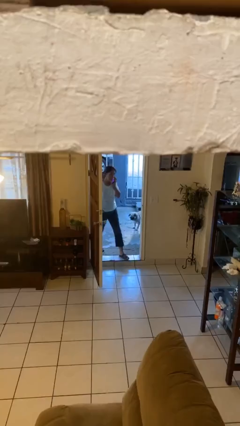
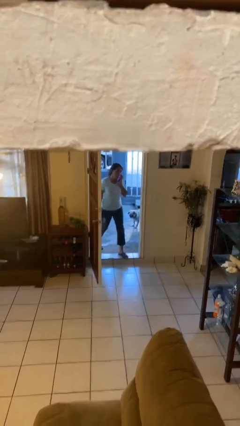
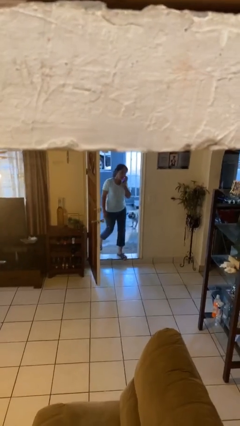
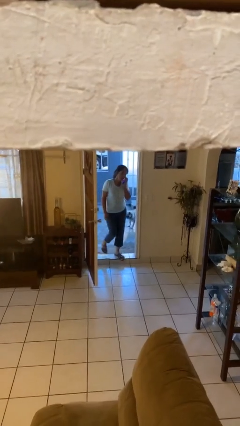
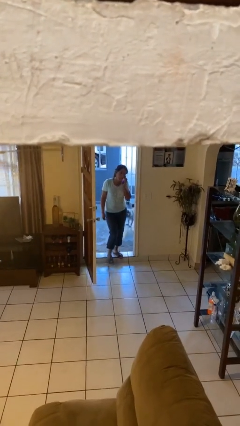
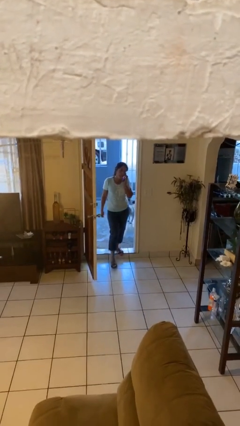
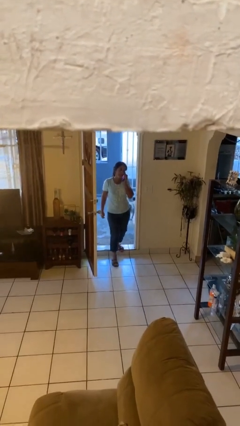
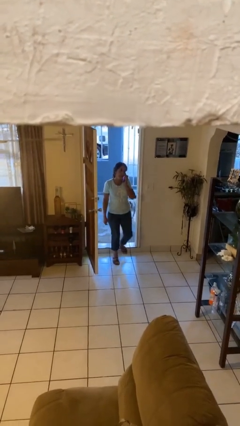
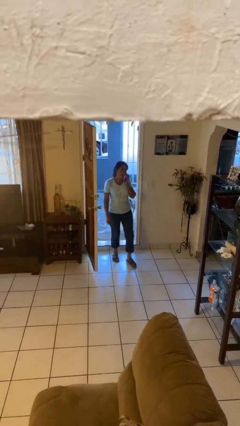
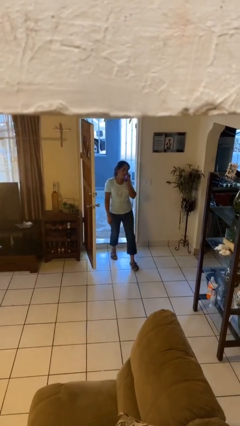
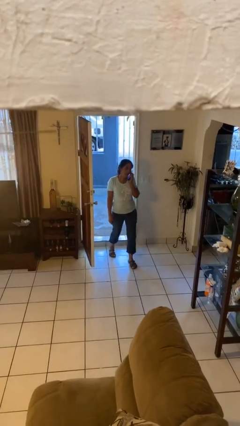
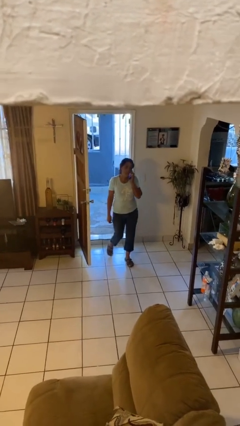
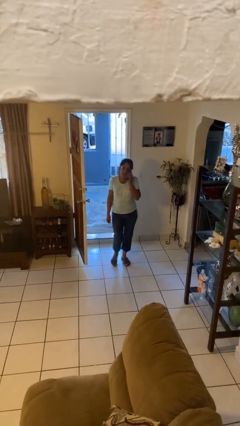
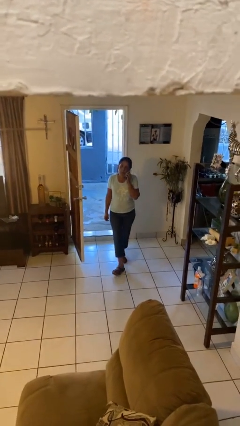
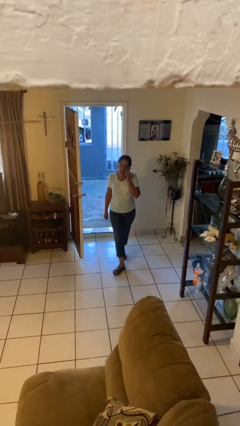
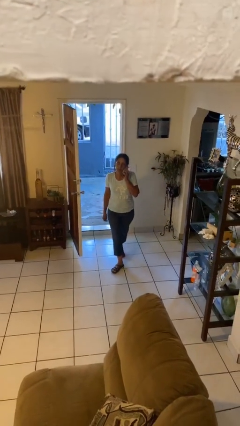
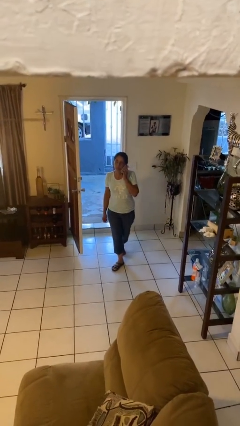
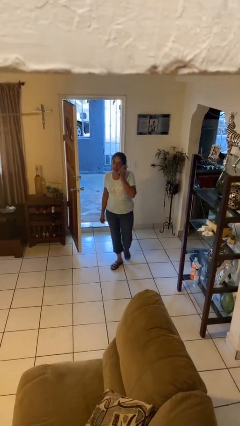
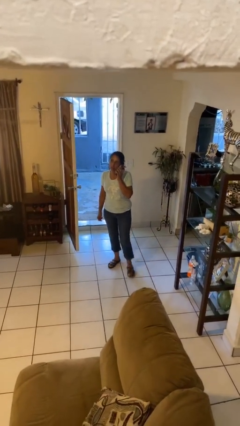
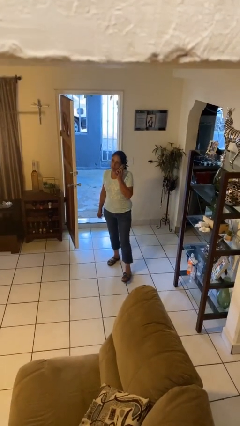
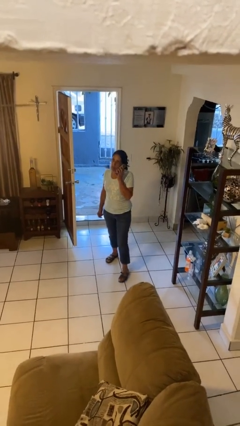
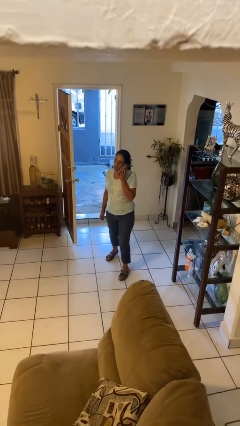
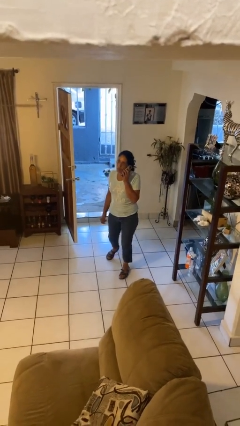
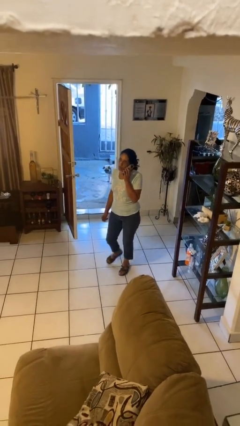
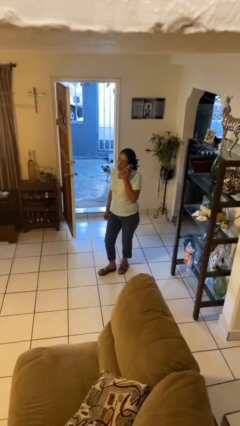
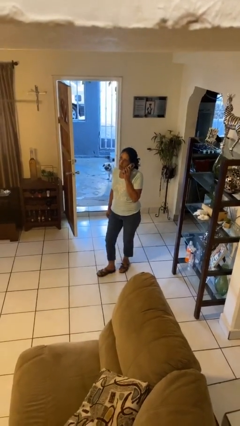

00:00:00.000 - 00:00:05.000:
person enters scene through structure

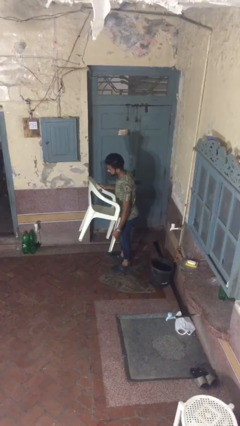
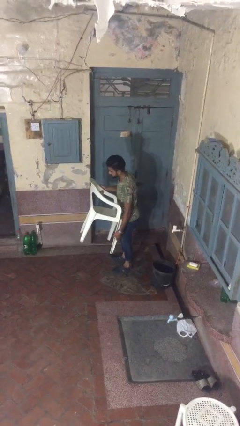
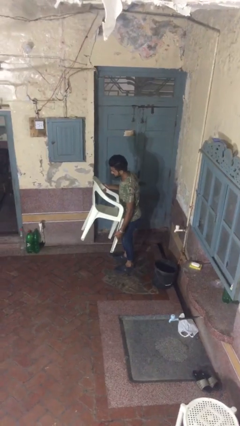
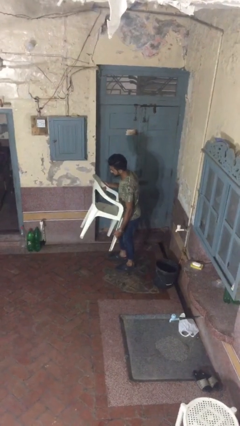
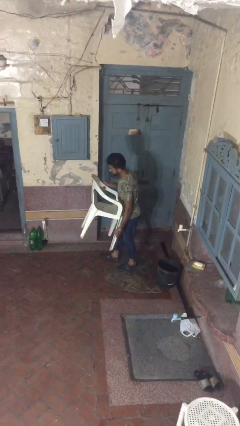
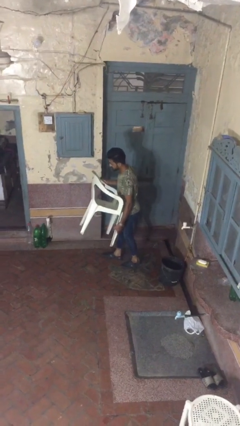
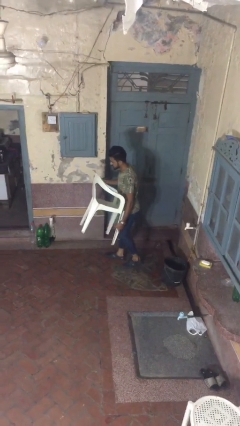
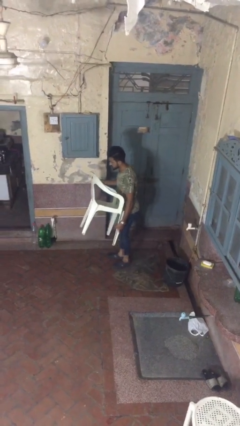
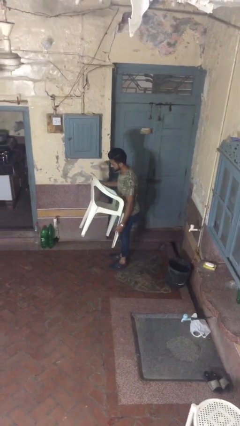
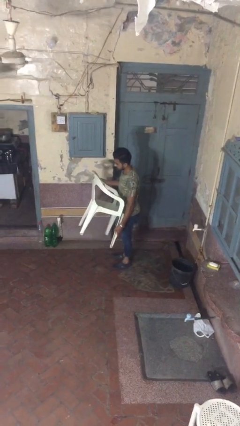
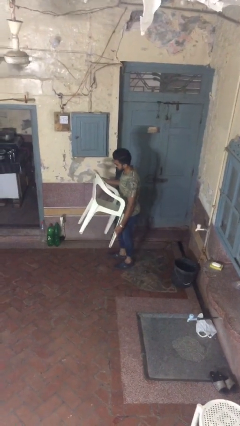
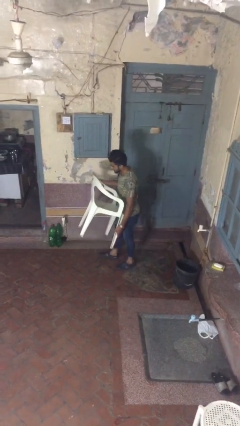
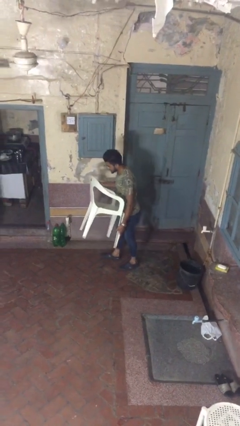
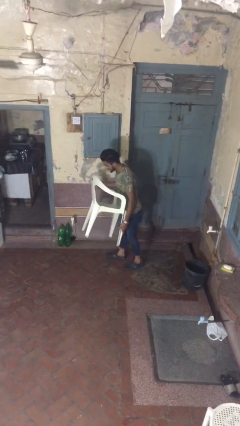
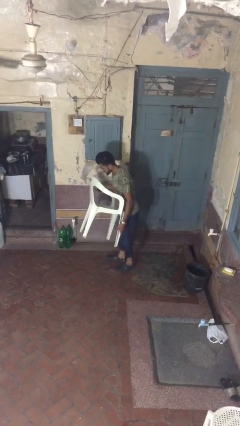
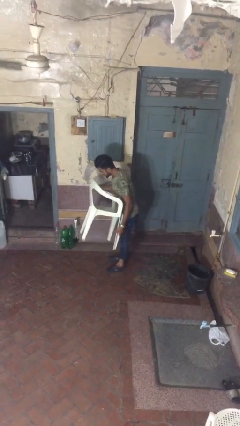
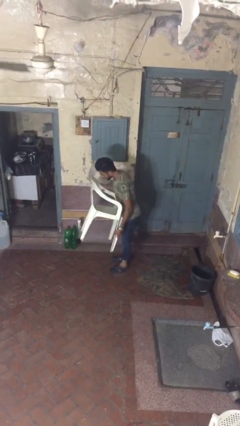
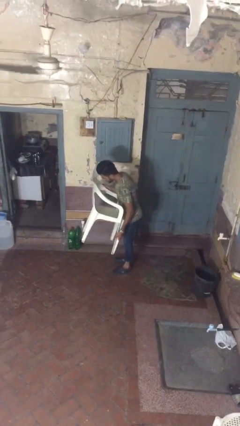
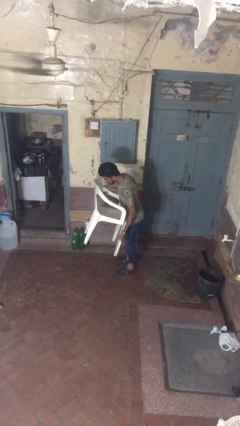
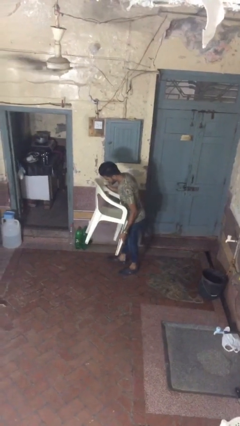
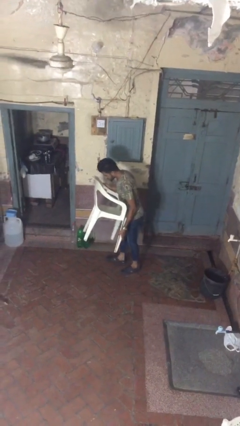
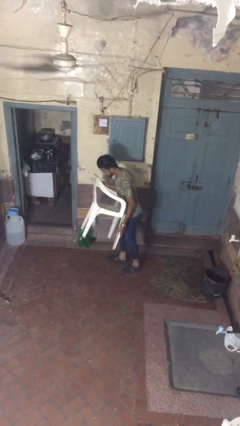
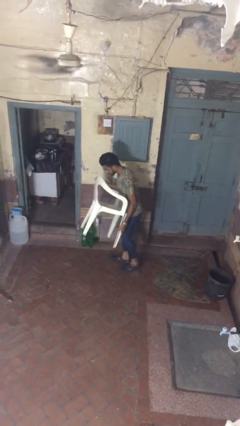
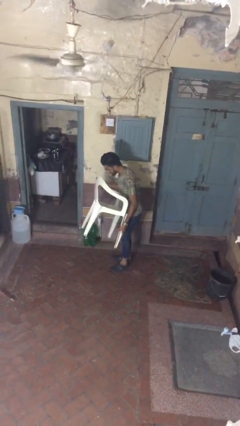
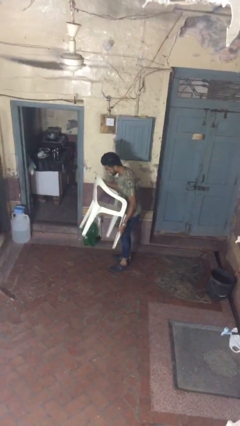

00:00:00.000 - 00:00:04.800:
person carries heavy object

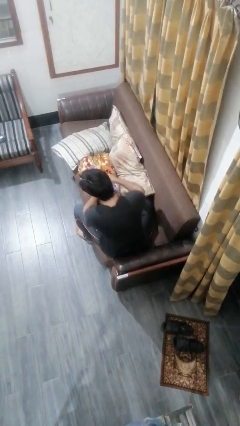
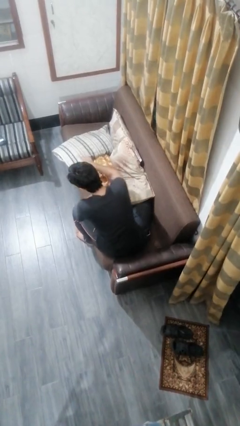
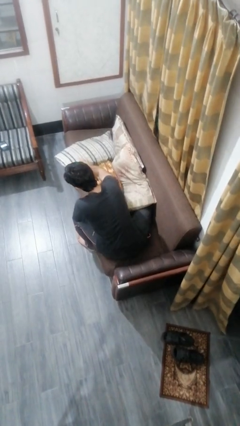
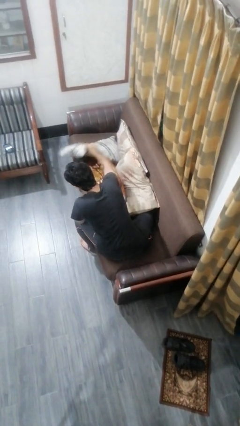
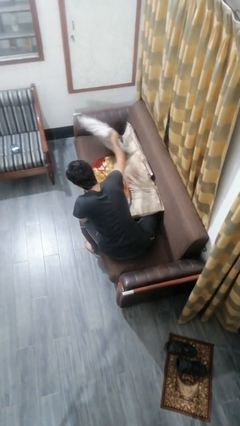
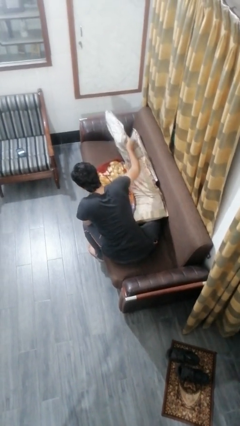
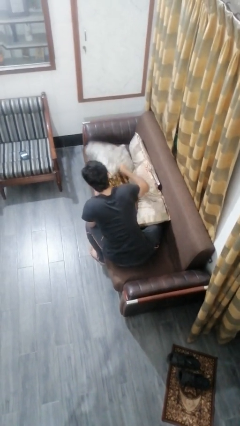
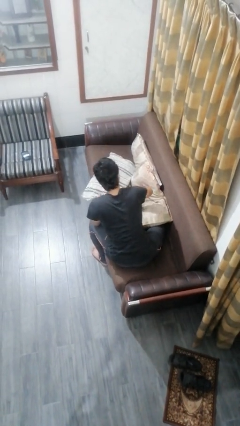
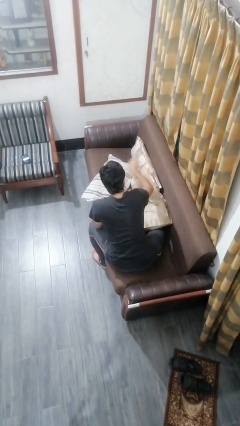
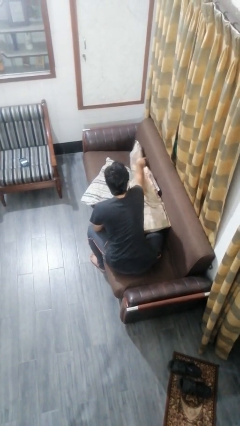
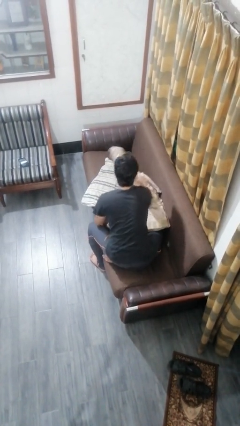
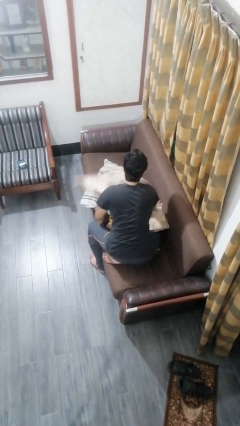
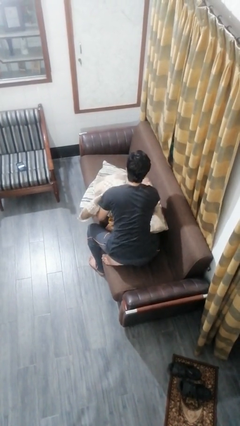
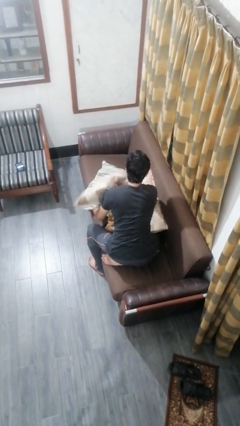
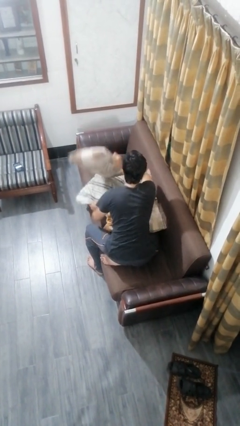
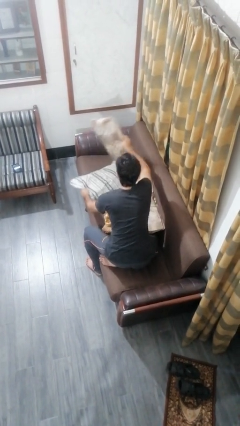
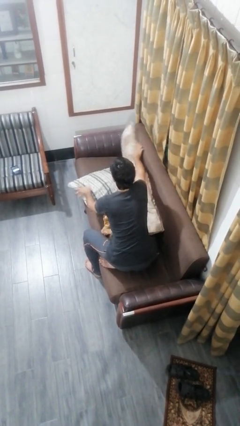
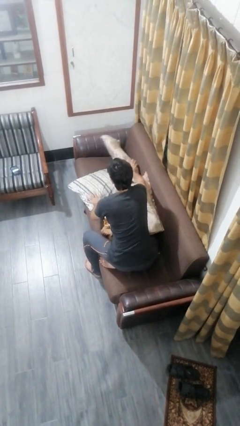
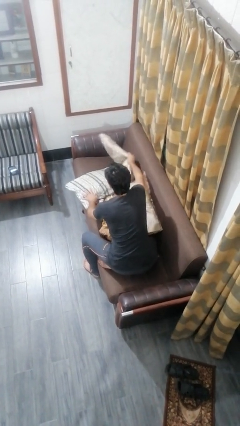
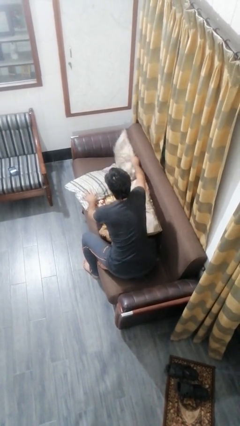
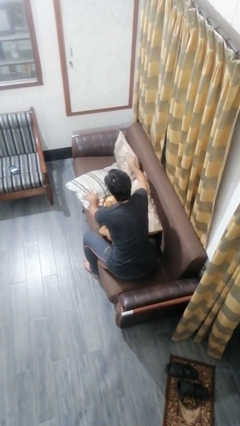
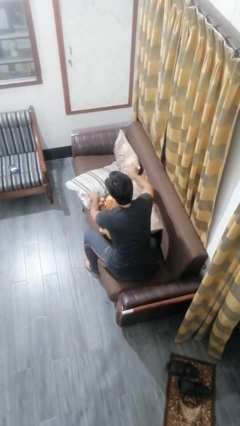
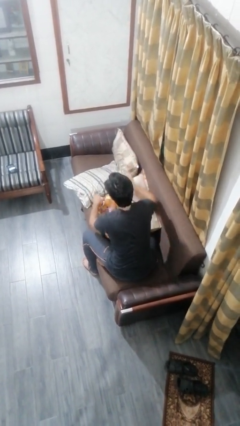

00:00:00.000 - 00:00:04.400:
person searches in couch

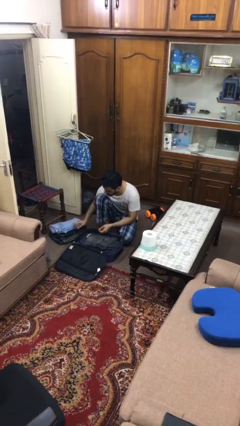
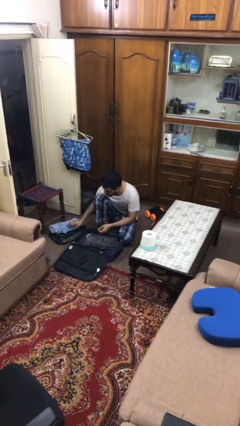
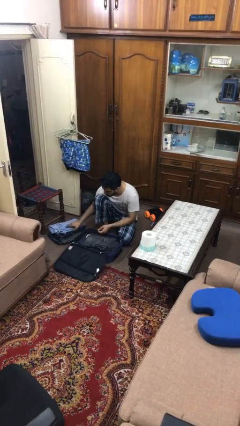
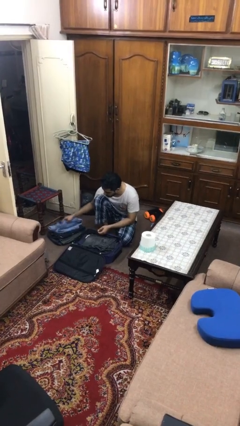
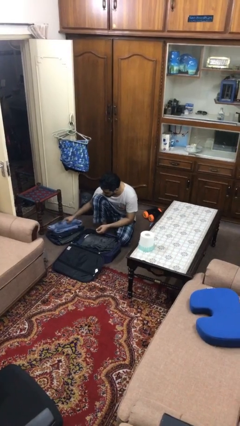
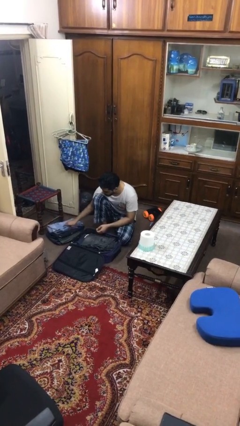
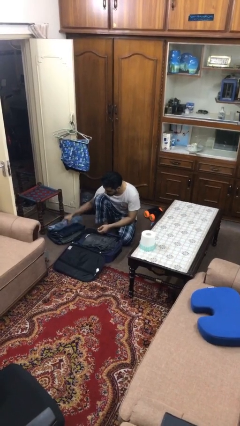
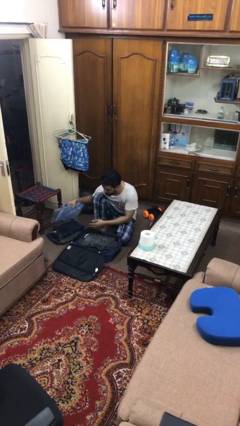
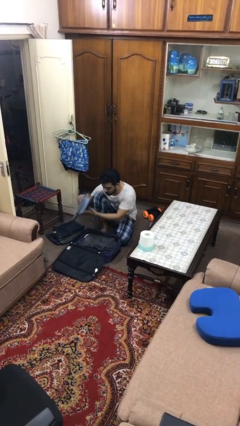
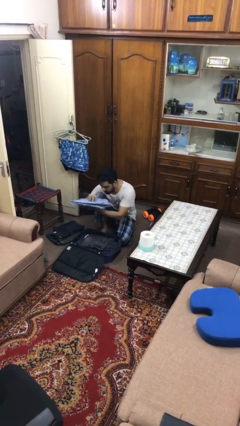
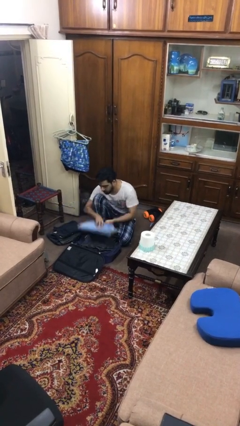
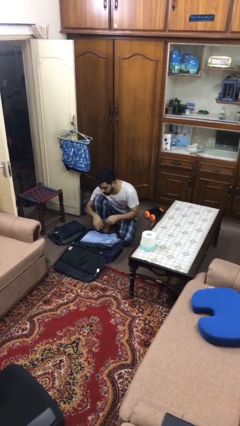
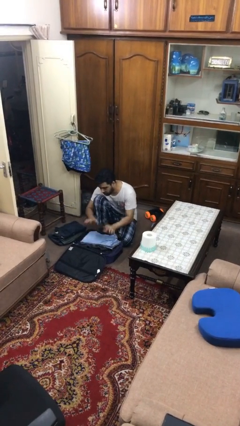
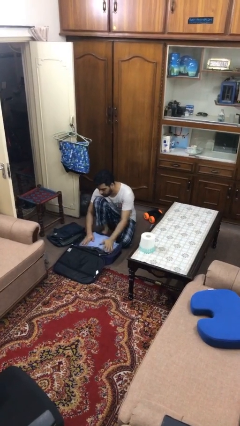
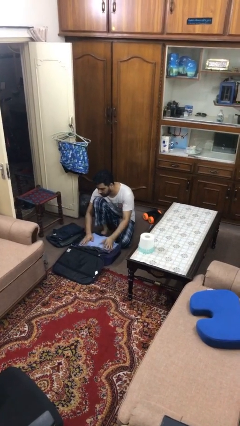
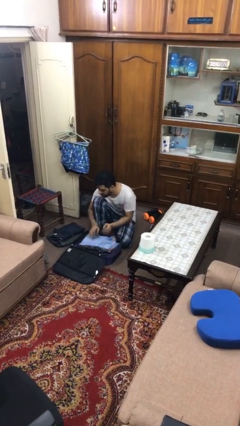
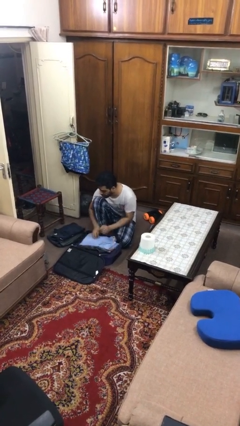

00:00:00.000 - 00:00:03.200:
person loads clothes into suitcase
